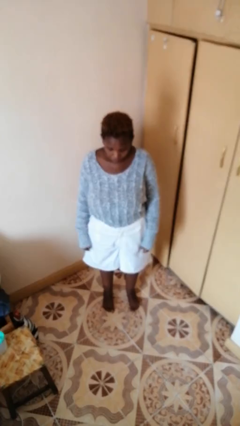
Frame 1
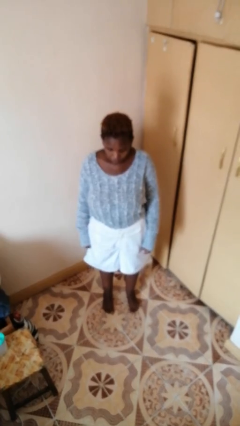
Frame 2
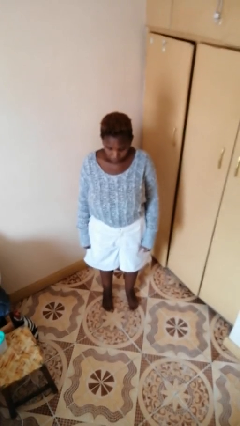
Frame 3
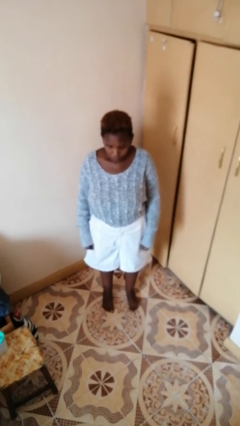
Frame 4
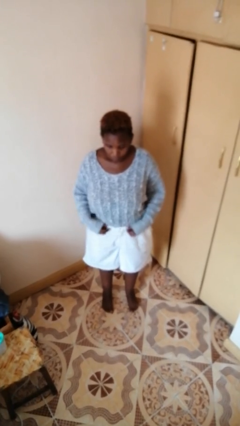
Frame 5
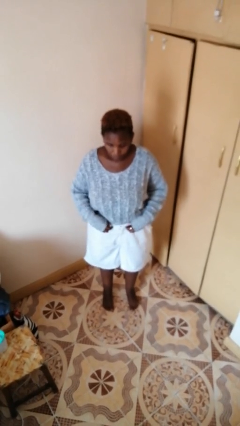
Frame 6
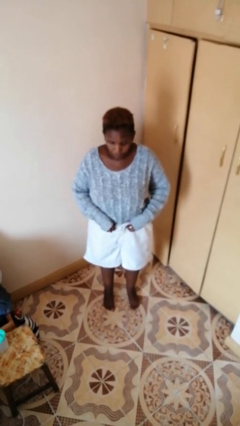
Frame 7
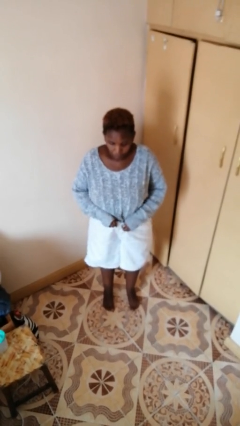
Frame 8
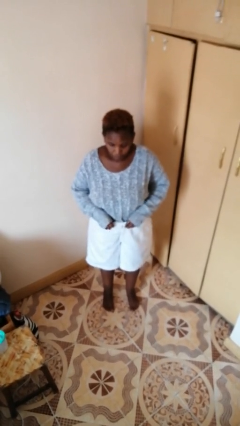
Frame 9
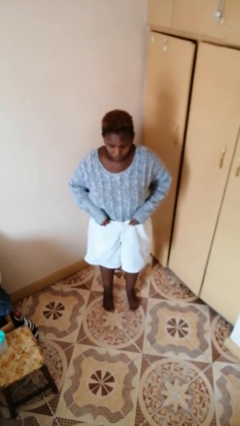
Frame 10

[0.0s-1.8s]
person hikes up pants

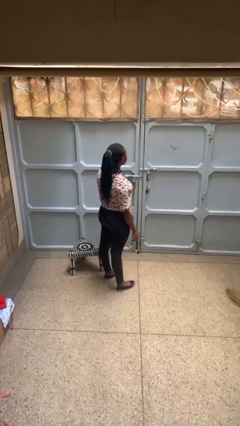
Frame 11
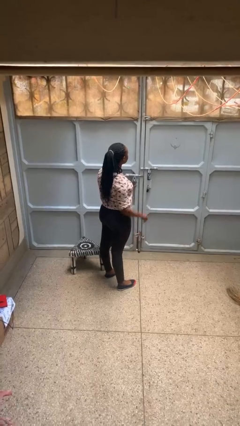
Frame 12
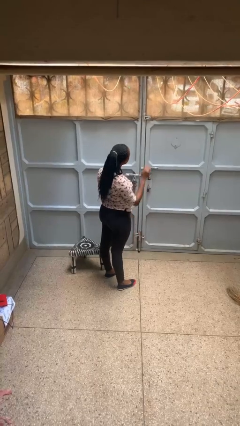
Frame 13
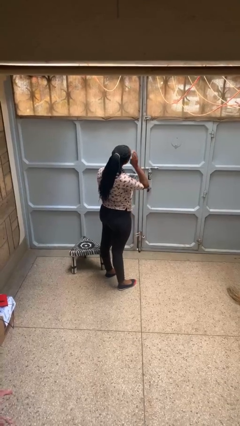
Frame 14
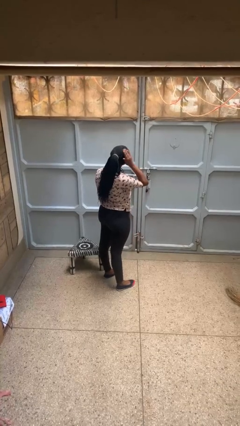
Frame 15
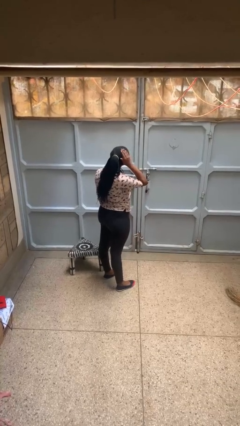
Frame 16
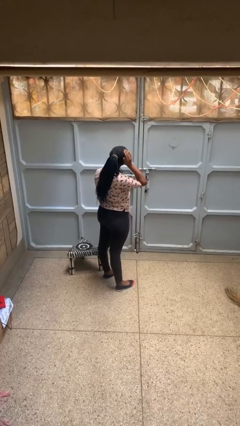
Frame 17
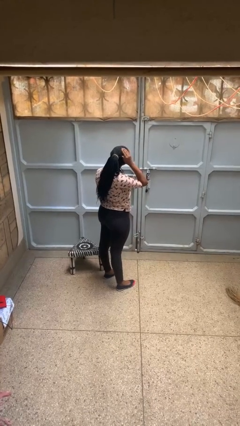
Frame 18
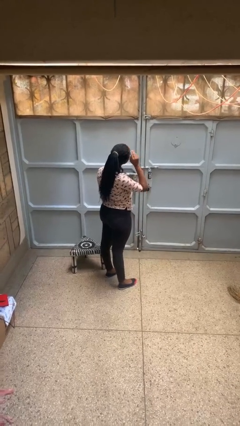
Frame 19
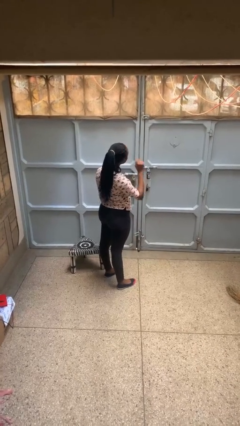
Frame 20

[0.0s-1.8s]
person pats head

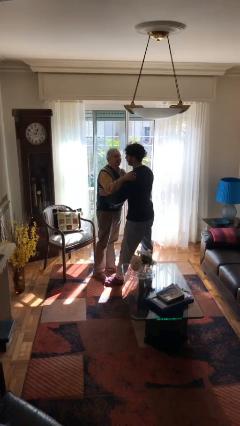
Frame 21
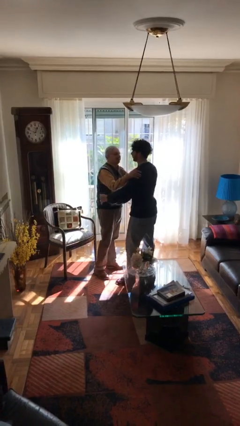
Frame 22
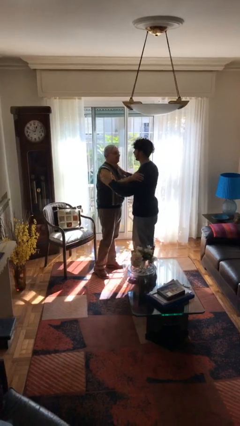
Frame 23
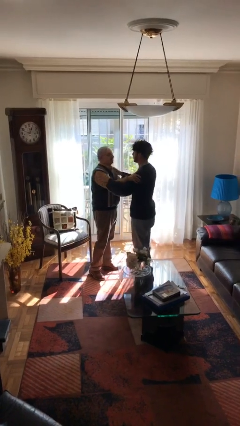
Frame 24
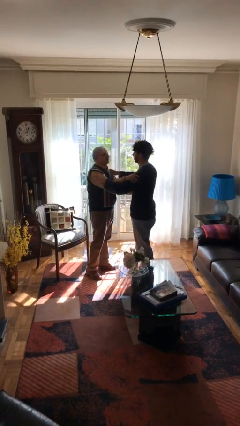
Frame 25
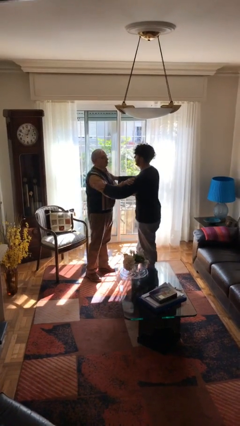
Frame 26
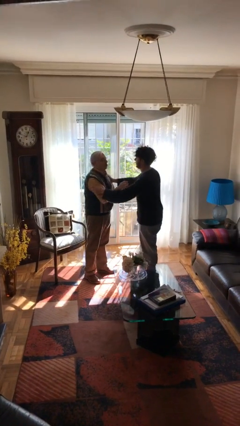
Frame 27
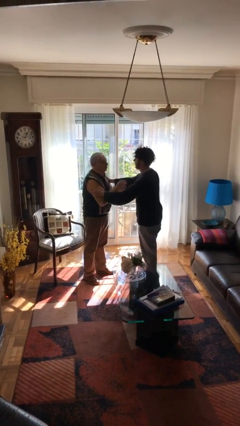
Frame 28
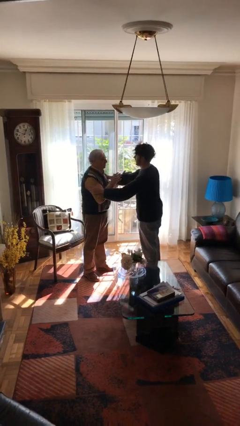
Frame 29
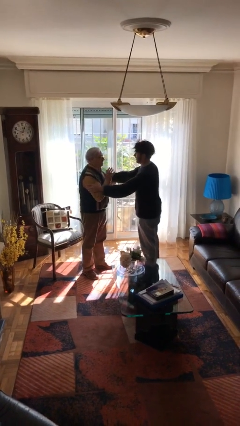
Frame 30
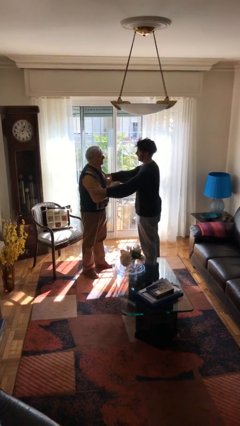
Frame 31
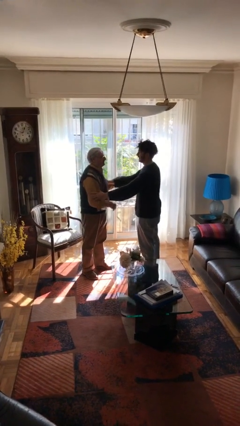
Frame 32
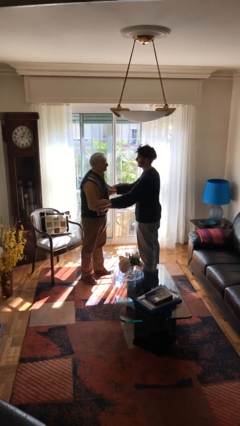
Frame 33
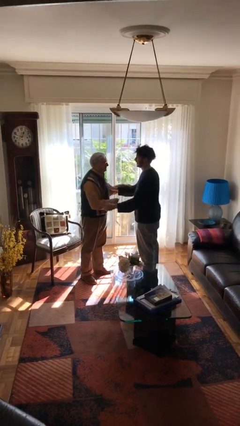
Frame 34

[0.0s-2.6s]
person talks to person

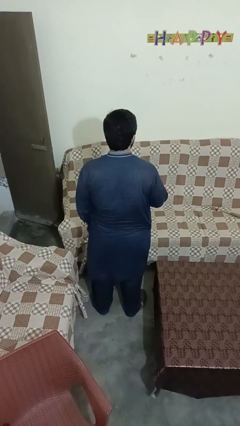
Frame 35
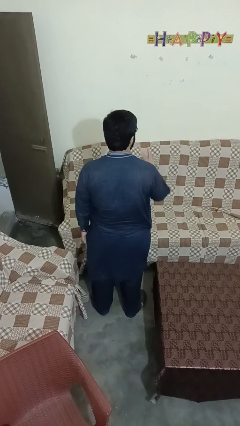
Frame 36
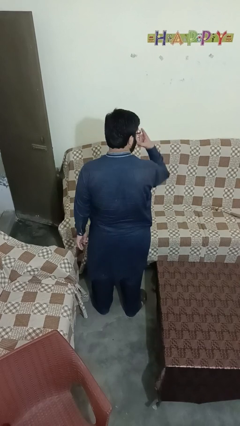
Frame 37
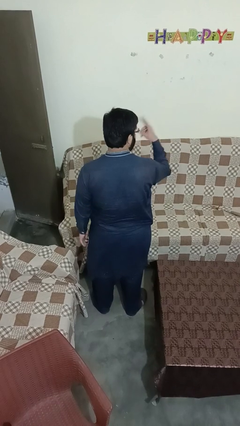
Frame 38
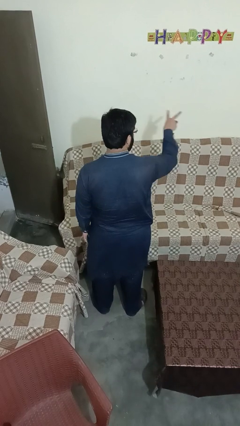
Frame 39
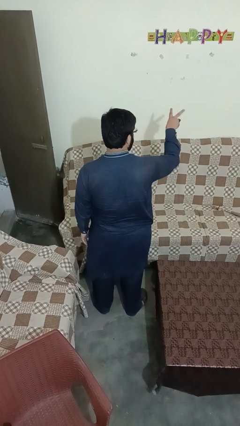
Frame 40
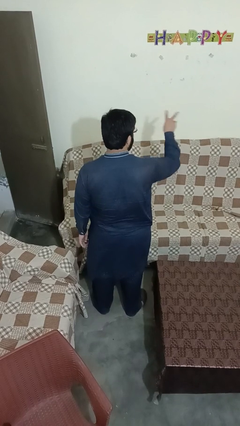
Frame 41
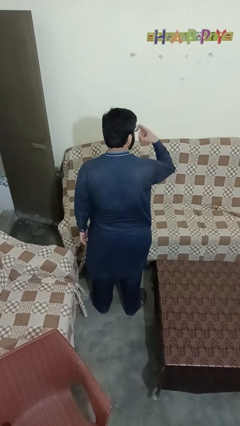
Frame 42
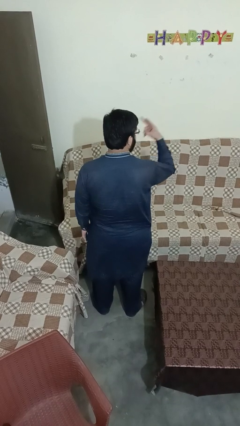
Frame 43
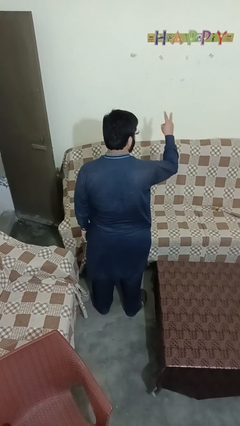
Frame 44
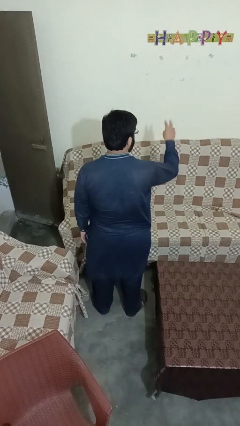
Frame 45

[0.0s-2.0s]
person gestures watch closely

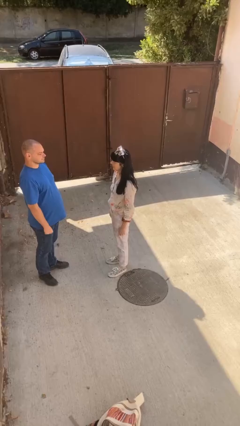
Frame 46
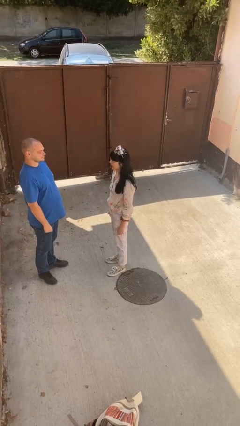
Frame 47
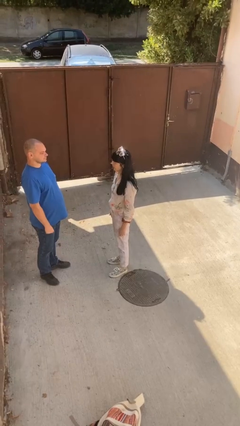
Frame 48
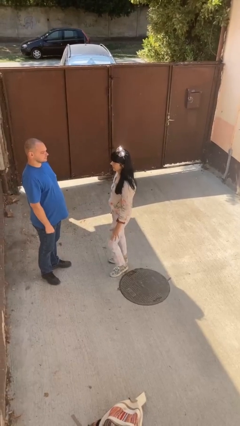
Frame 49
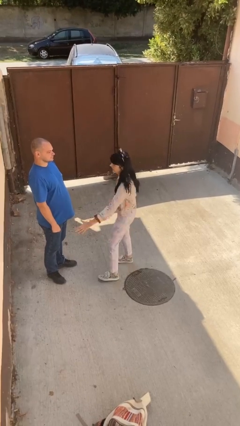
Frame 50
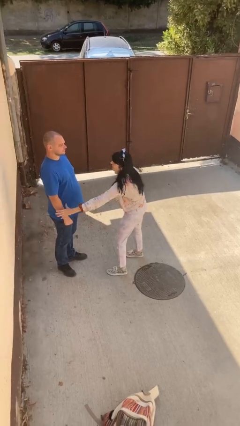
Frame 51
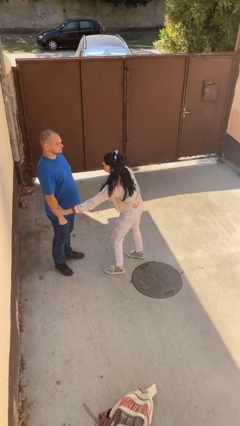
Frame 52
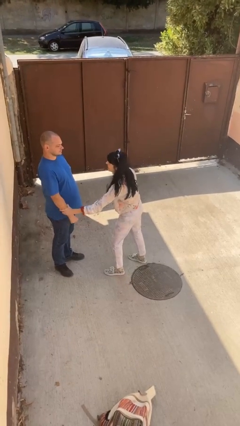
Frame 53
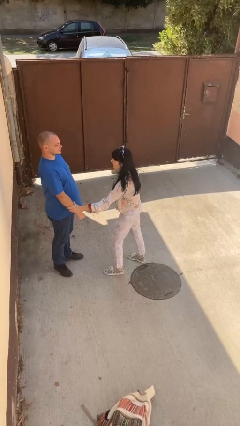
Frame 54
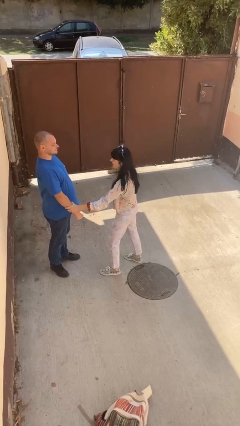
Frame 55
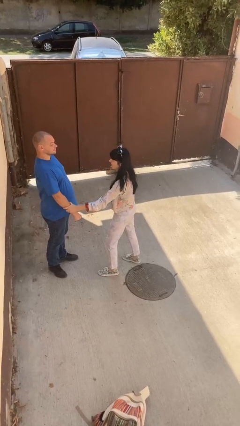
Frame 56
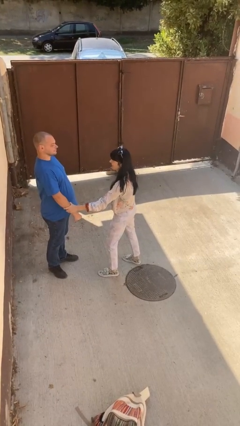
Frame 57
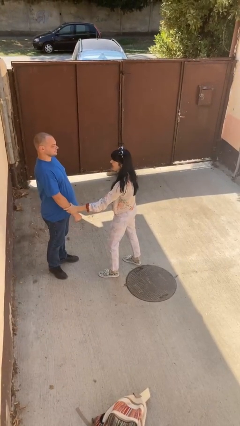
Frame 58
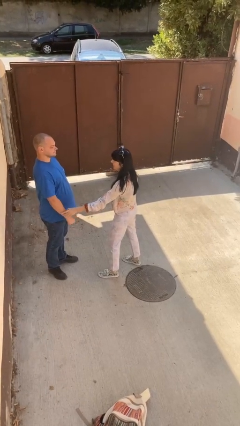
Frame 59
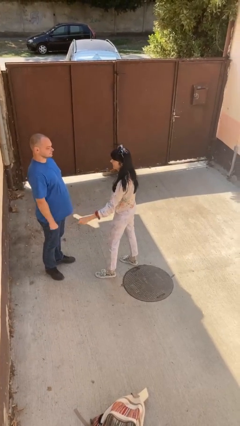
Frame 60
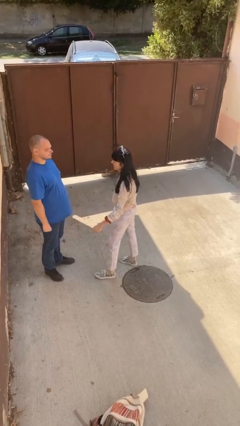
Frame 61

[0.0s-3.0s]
person grabs person by forearm

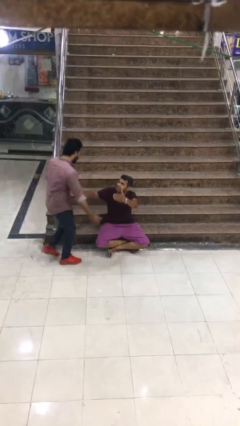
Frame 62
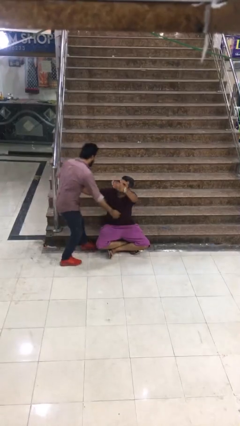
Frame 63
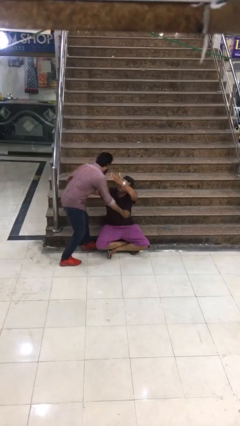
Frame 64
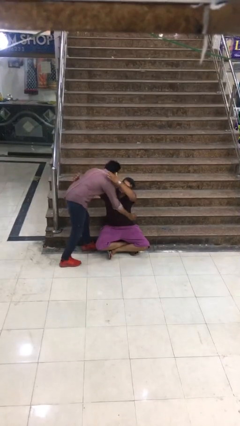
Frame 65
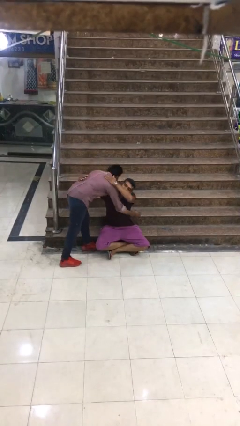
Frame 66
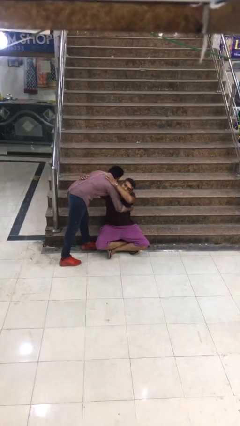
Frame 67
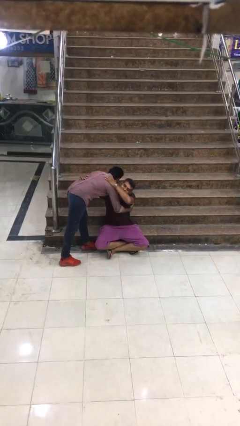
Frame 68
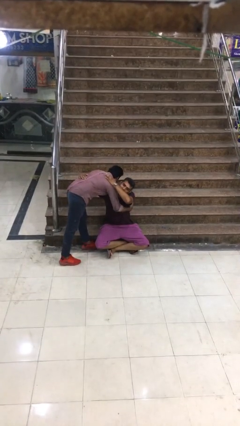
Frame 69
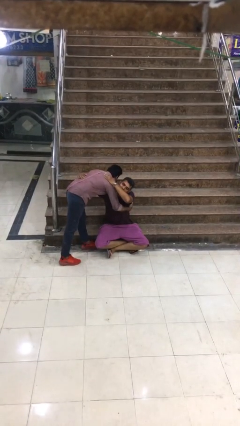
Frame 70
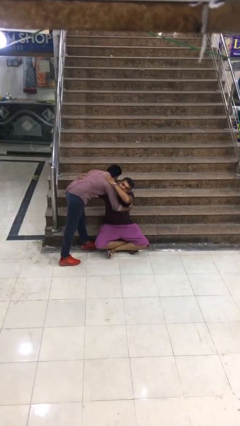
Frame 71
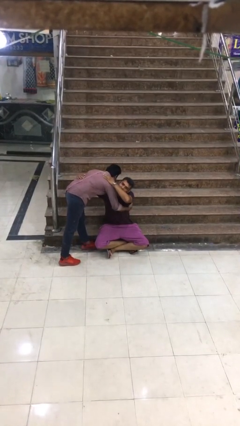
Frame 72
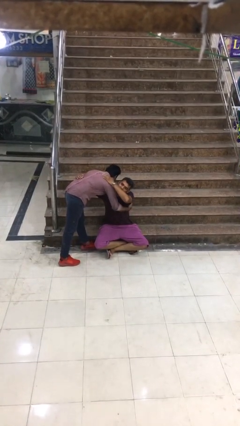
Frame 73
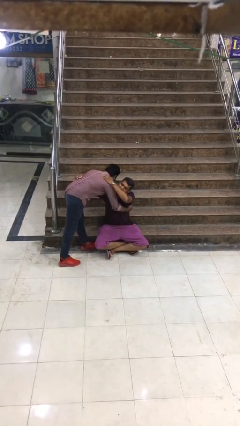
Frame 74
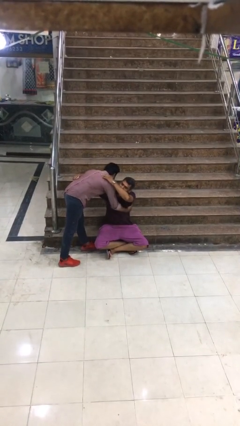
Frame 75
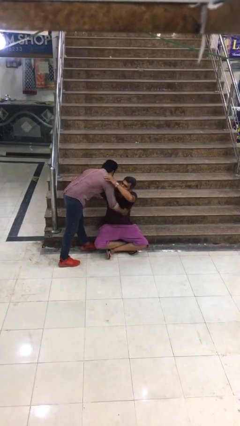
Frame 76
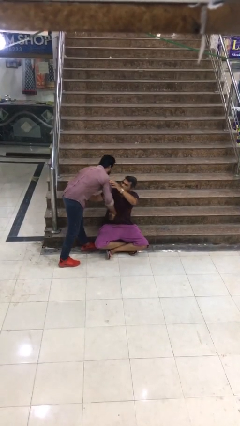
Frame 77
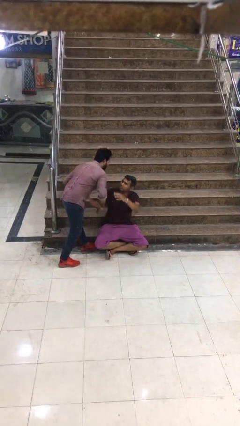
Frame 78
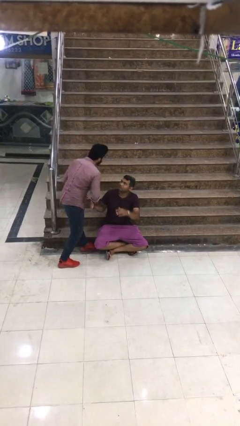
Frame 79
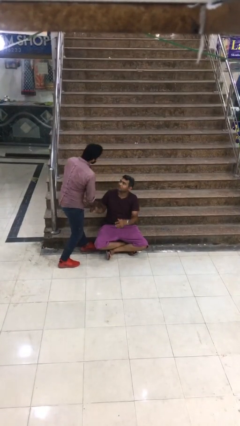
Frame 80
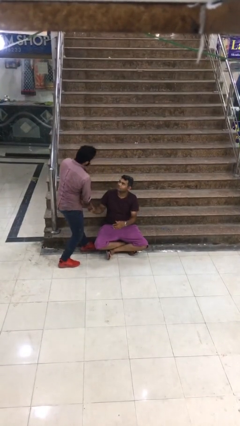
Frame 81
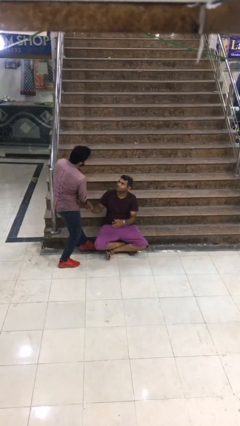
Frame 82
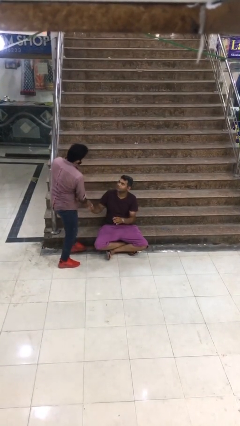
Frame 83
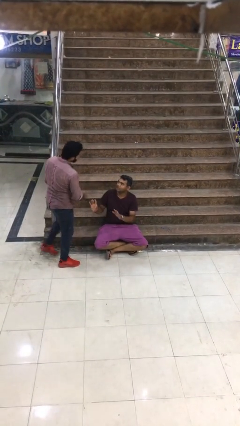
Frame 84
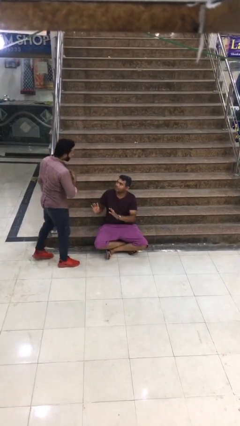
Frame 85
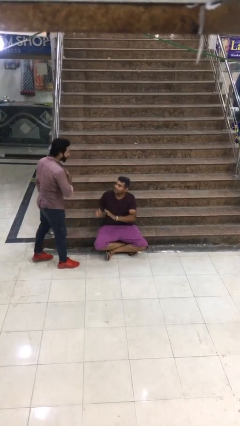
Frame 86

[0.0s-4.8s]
person embraces person

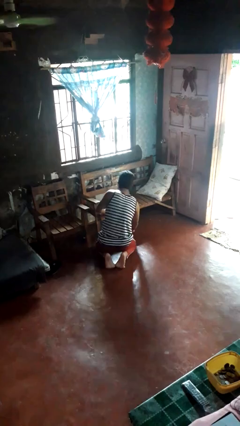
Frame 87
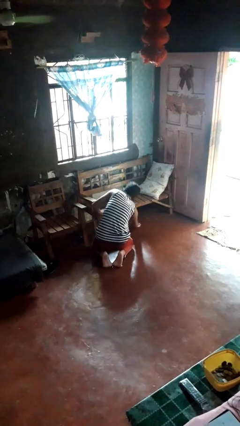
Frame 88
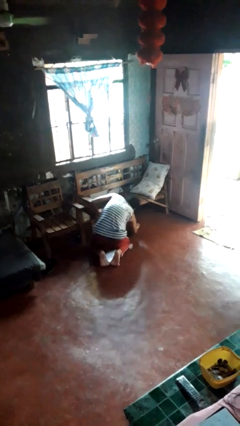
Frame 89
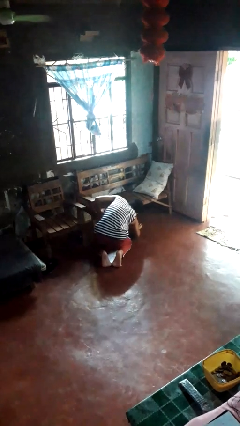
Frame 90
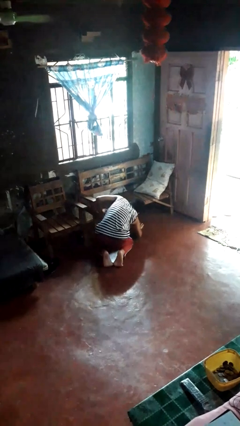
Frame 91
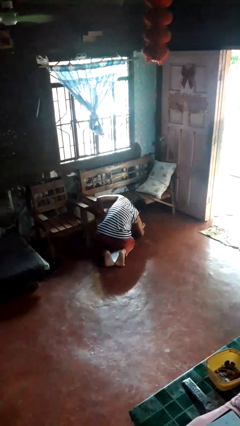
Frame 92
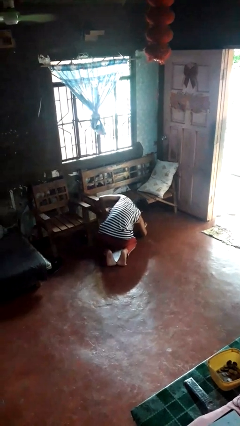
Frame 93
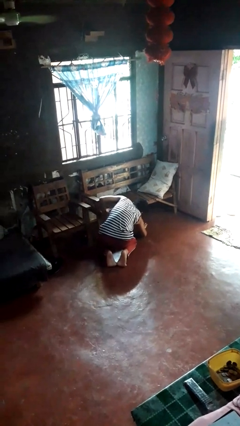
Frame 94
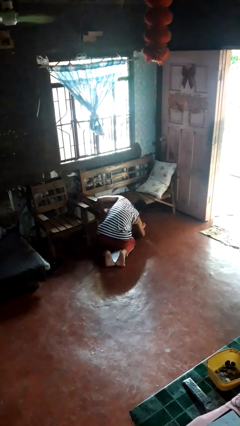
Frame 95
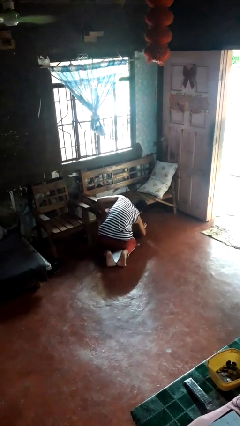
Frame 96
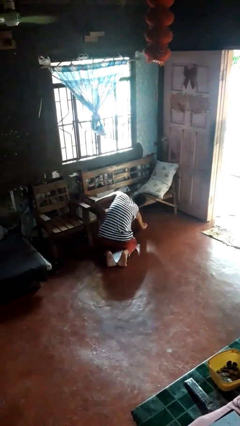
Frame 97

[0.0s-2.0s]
person searches in couch
